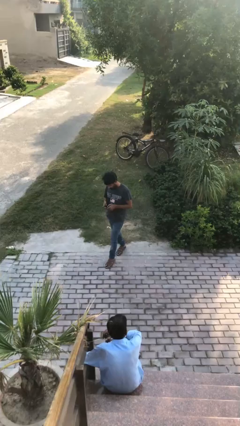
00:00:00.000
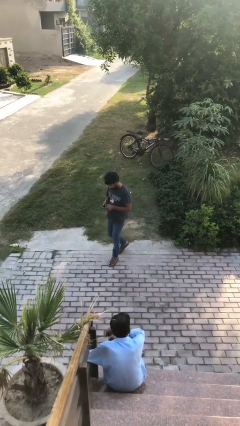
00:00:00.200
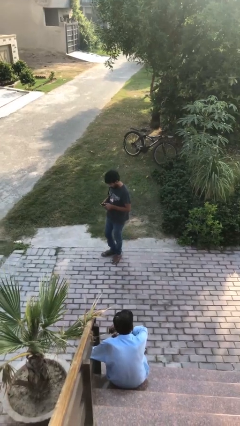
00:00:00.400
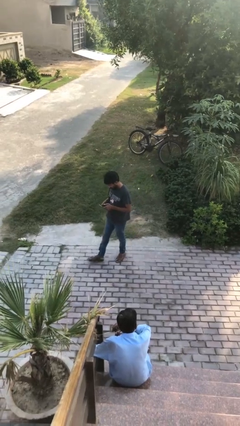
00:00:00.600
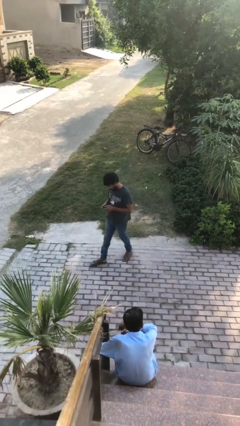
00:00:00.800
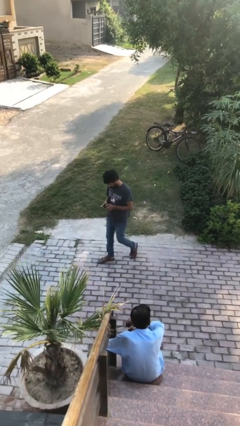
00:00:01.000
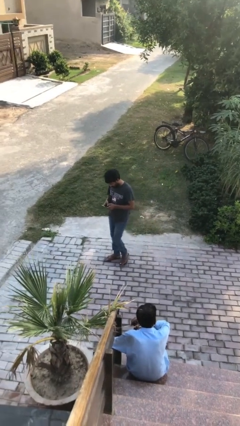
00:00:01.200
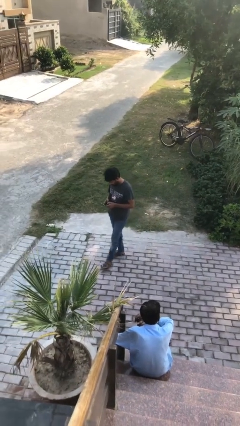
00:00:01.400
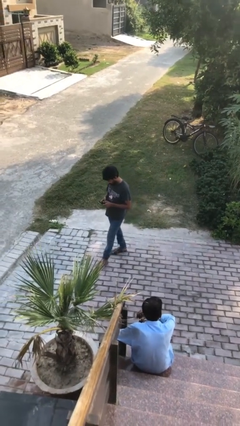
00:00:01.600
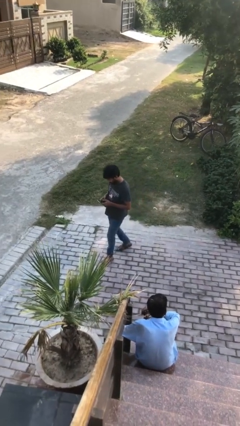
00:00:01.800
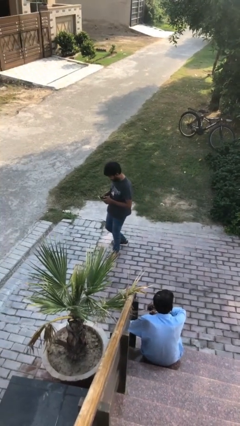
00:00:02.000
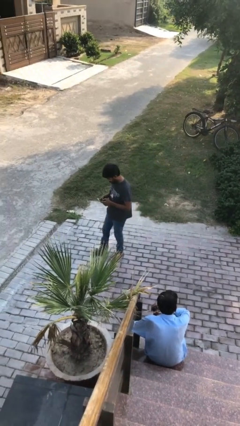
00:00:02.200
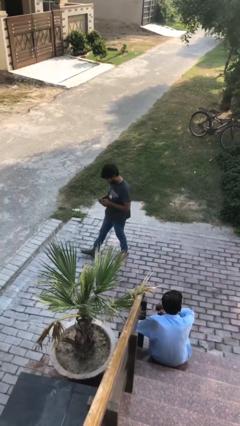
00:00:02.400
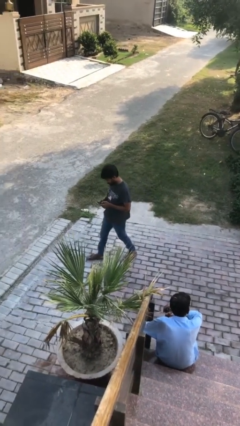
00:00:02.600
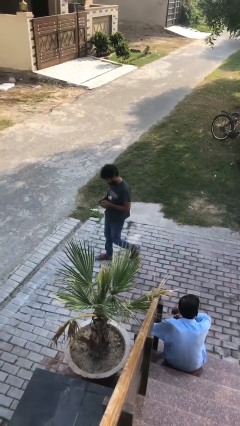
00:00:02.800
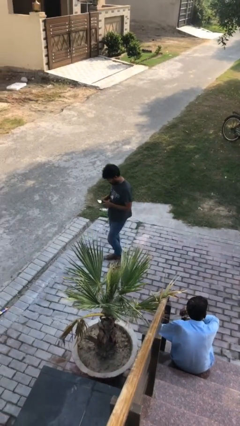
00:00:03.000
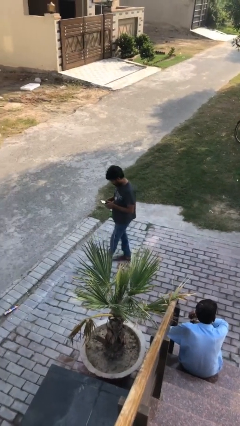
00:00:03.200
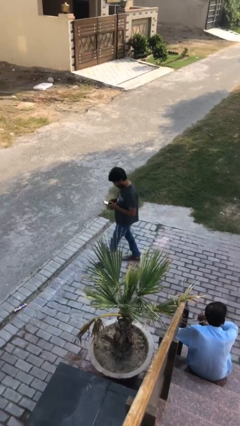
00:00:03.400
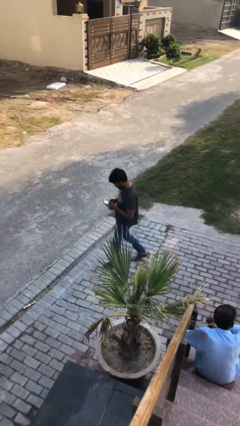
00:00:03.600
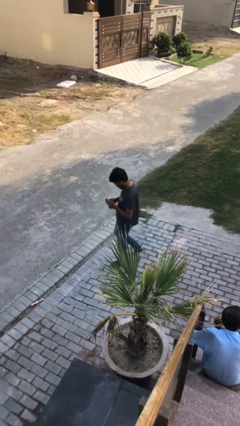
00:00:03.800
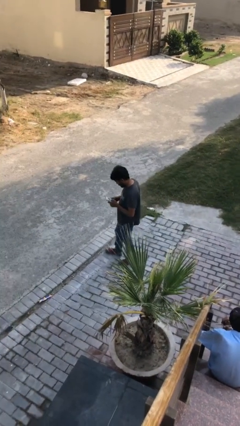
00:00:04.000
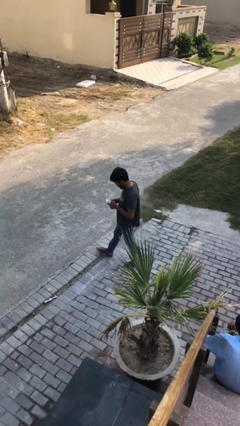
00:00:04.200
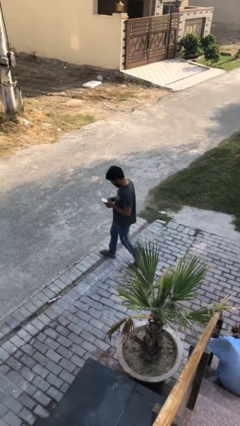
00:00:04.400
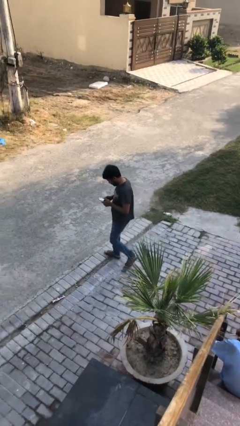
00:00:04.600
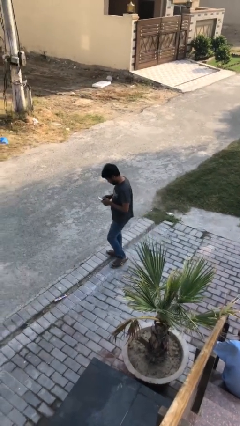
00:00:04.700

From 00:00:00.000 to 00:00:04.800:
person texts on phone

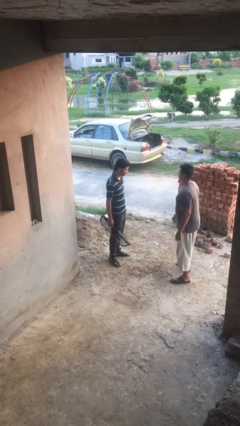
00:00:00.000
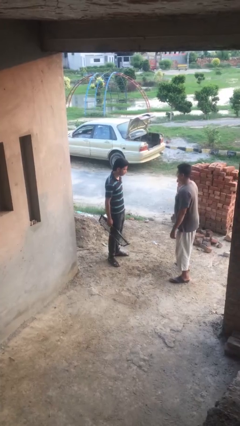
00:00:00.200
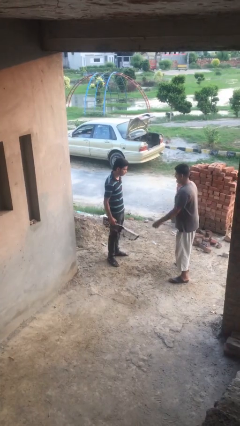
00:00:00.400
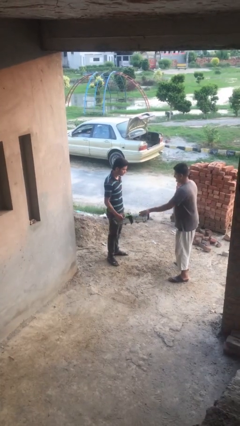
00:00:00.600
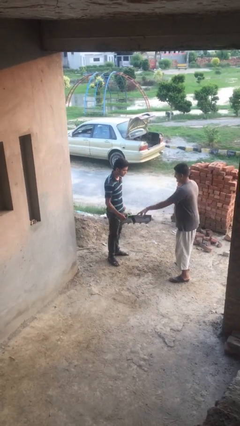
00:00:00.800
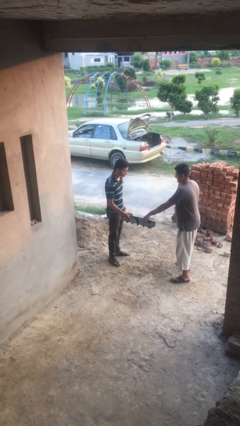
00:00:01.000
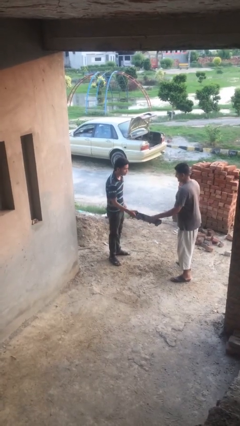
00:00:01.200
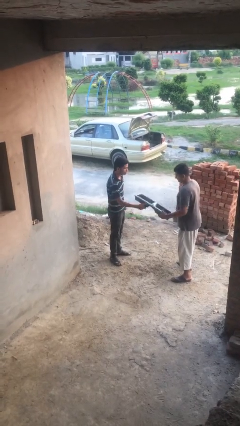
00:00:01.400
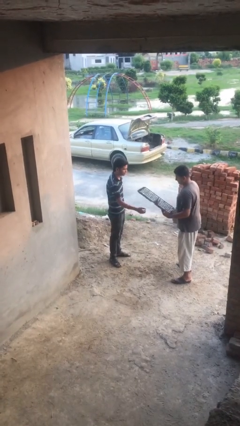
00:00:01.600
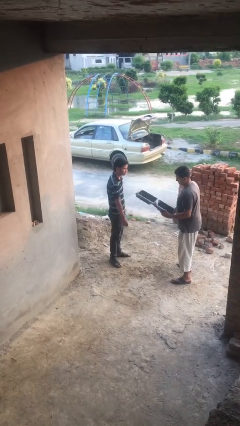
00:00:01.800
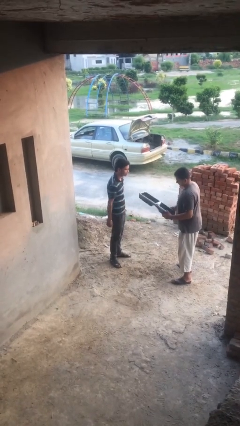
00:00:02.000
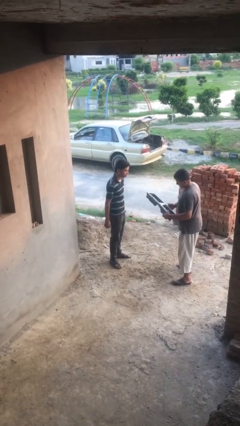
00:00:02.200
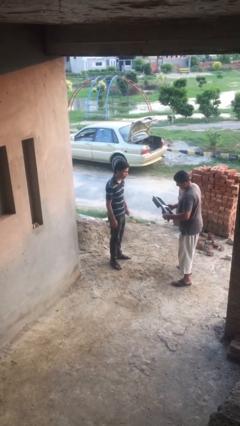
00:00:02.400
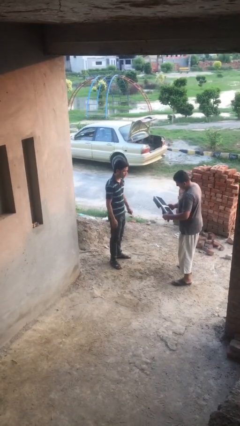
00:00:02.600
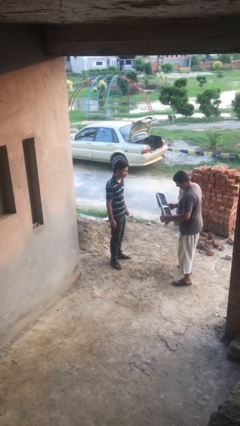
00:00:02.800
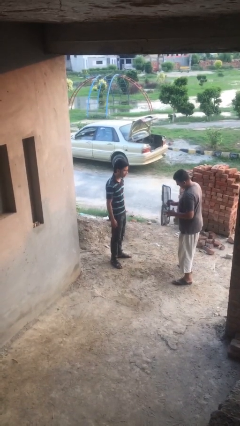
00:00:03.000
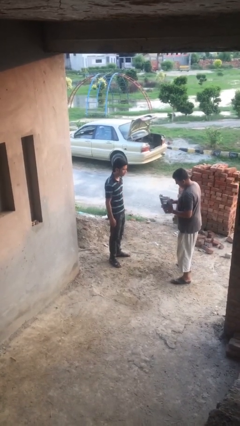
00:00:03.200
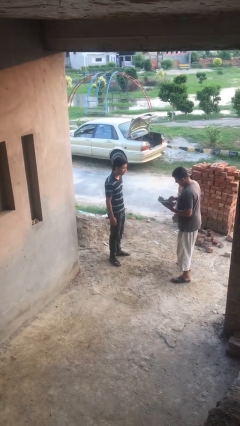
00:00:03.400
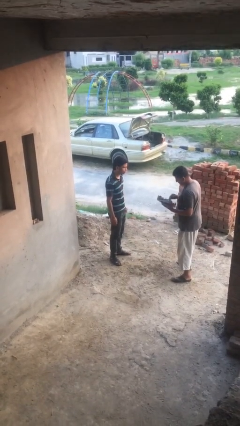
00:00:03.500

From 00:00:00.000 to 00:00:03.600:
person transfers object to person

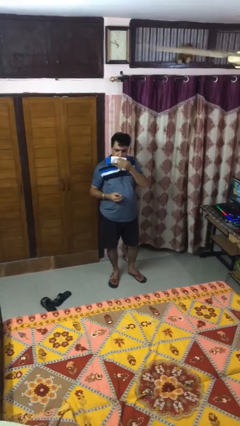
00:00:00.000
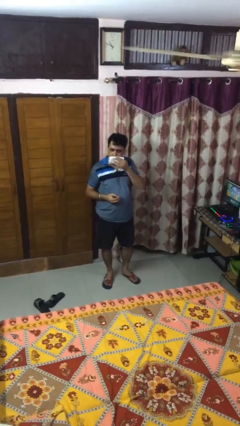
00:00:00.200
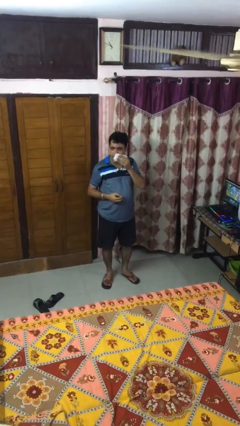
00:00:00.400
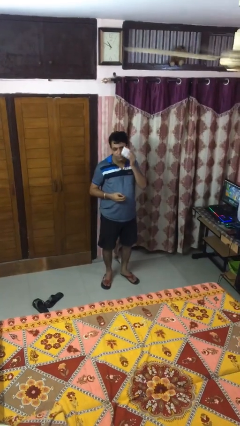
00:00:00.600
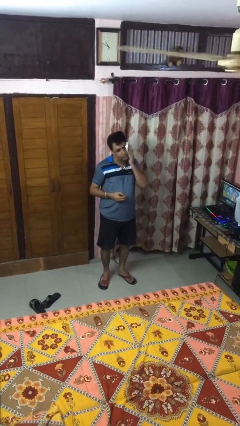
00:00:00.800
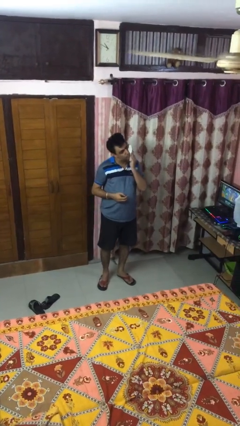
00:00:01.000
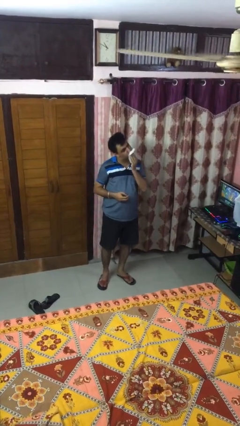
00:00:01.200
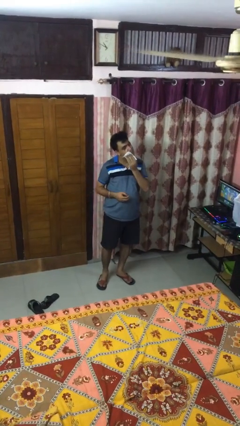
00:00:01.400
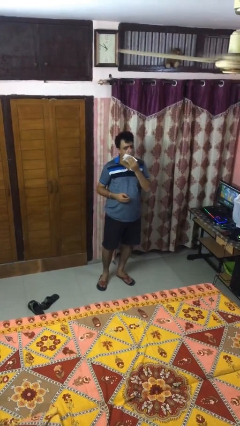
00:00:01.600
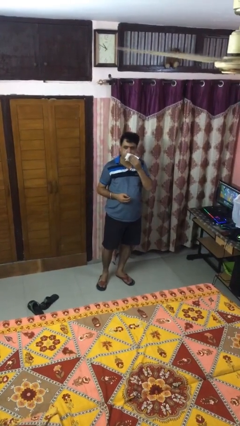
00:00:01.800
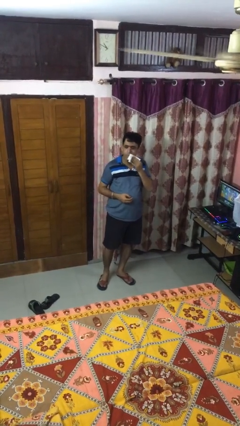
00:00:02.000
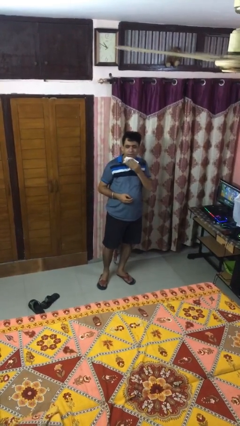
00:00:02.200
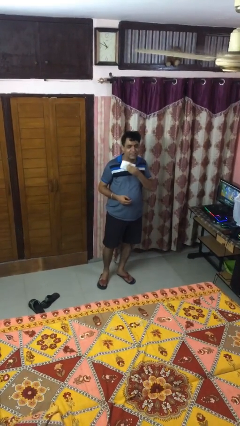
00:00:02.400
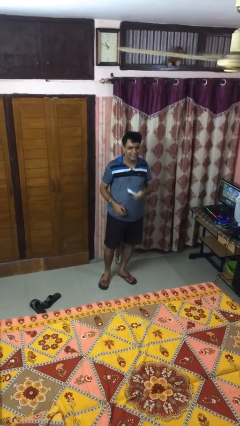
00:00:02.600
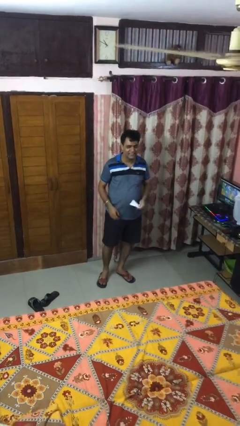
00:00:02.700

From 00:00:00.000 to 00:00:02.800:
person wipes mouth with napkin

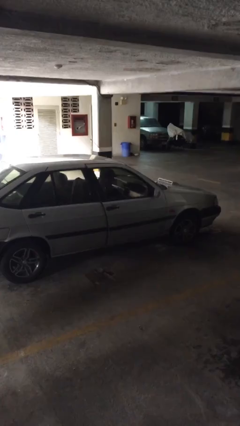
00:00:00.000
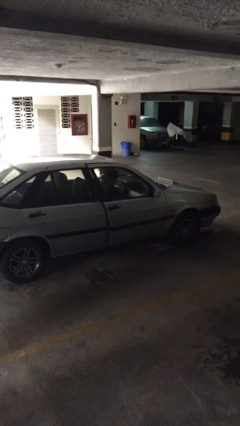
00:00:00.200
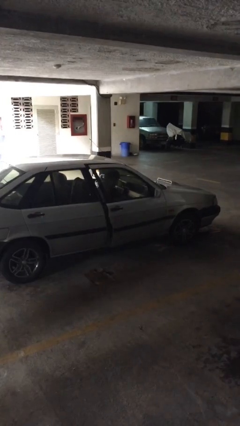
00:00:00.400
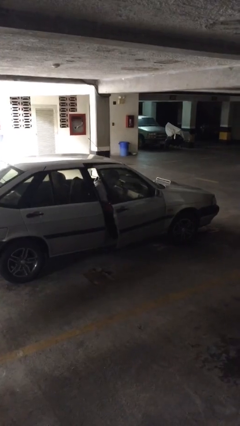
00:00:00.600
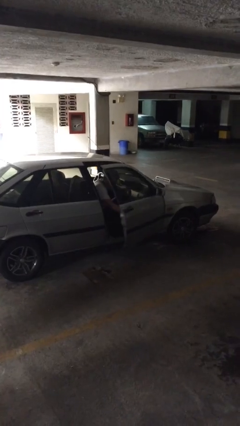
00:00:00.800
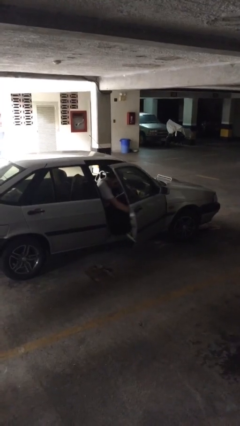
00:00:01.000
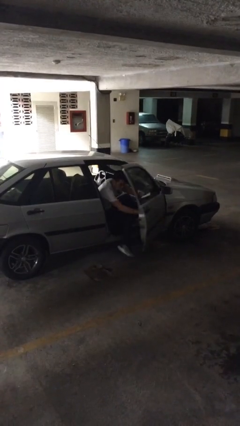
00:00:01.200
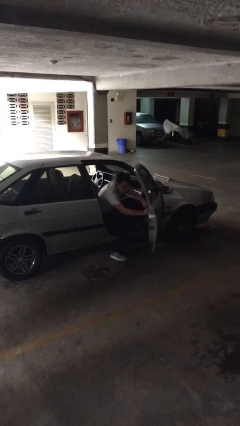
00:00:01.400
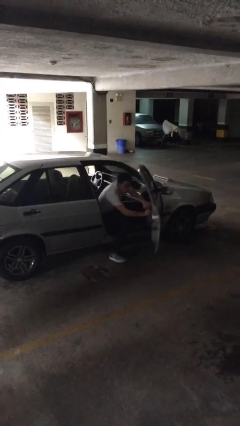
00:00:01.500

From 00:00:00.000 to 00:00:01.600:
person opens car door

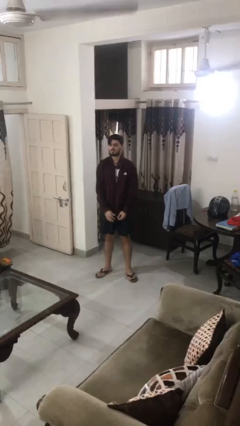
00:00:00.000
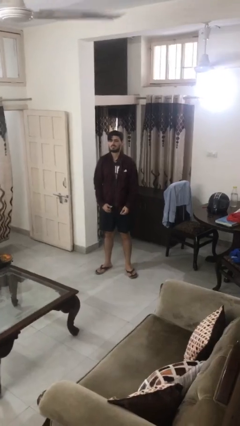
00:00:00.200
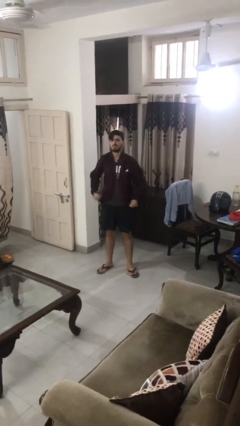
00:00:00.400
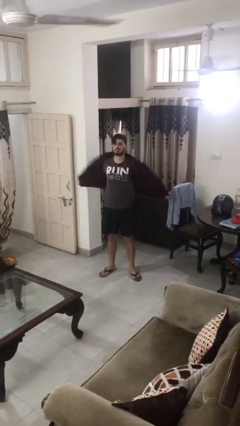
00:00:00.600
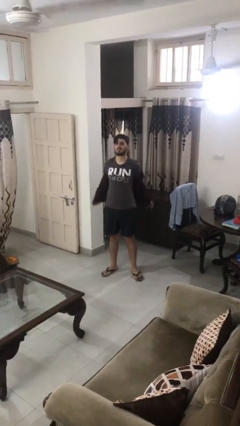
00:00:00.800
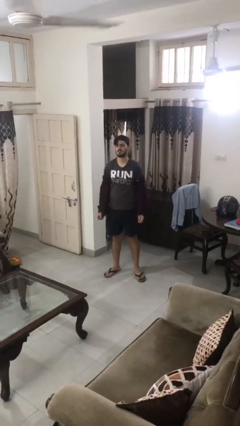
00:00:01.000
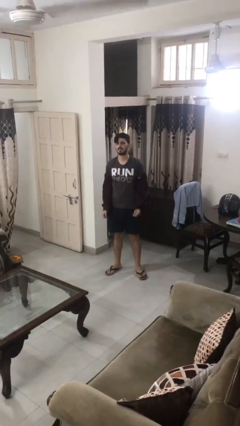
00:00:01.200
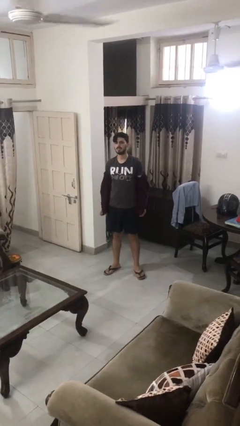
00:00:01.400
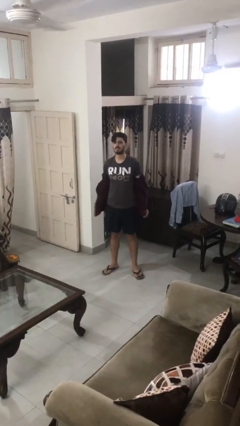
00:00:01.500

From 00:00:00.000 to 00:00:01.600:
person takes off jacket

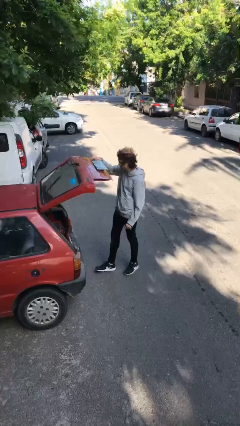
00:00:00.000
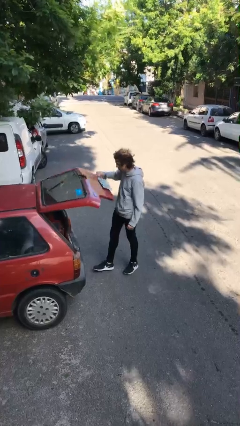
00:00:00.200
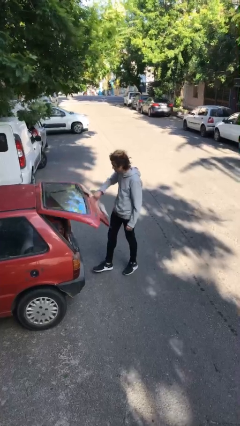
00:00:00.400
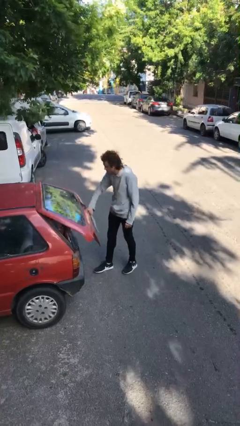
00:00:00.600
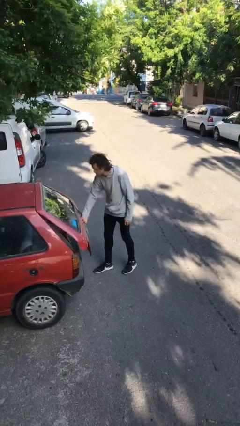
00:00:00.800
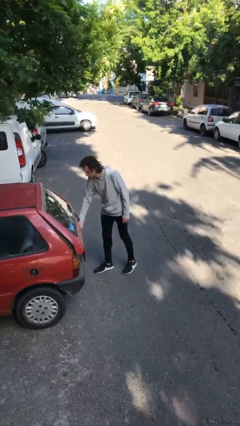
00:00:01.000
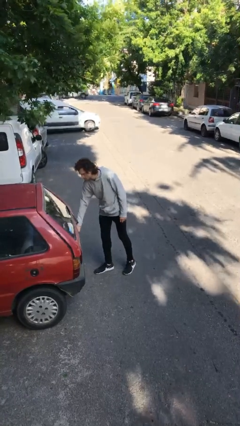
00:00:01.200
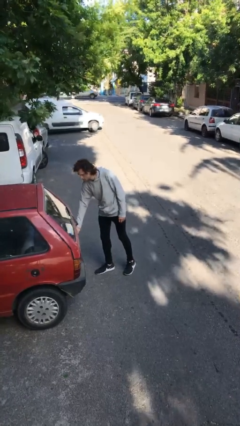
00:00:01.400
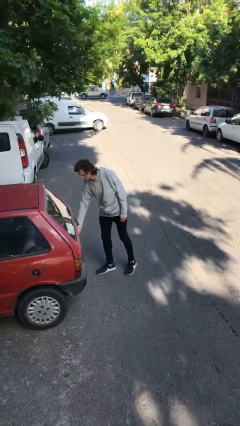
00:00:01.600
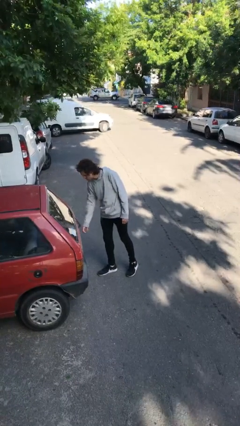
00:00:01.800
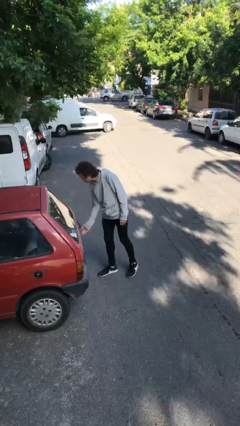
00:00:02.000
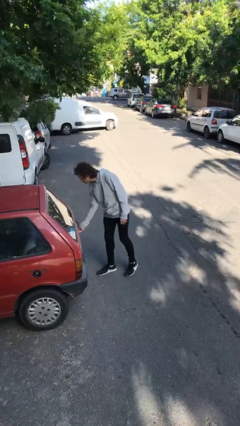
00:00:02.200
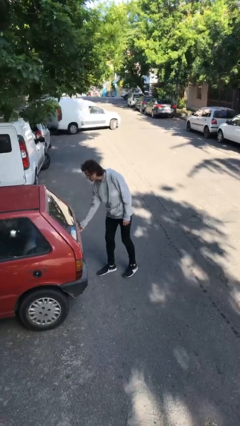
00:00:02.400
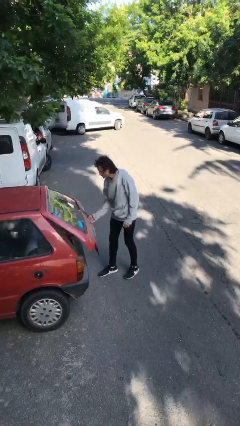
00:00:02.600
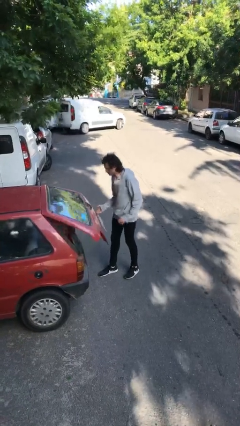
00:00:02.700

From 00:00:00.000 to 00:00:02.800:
person closes car trunk
